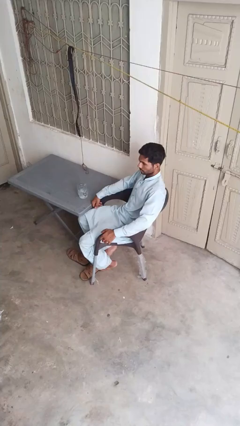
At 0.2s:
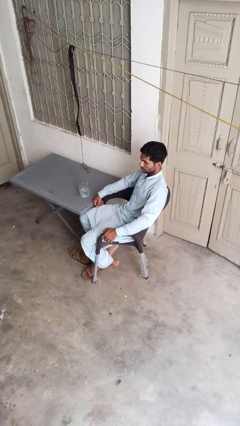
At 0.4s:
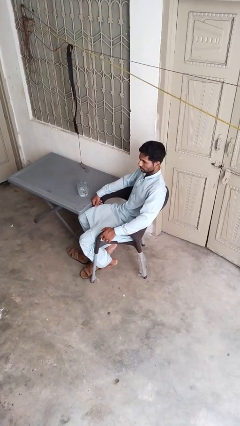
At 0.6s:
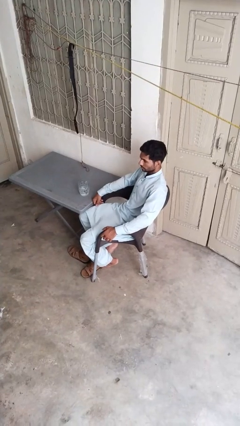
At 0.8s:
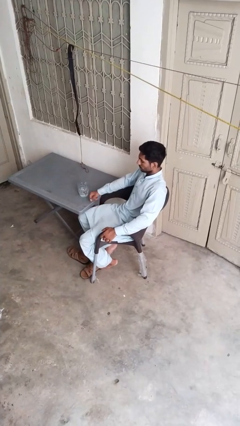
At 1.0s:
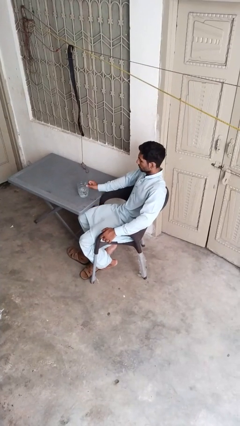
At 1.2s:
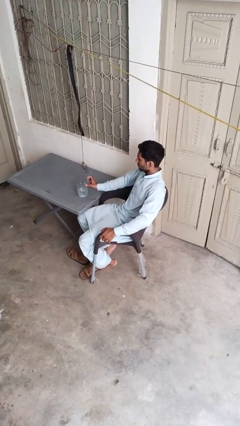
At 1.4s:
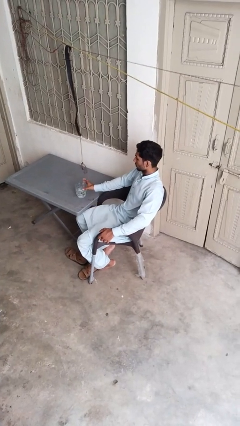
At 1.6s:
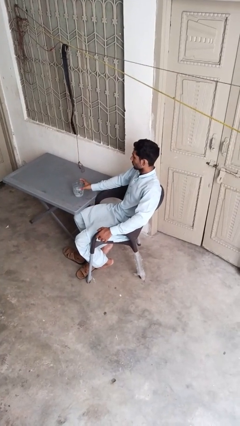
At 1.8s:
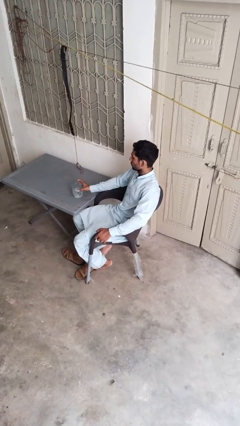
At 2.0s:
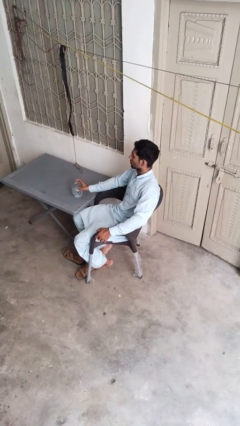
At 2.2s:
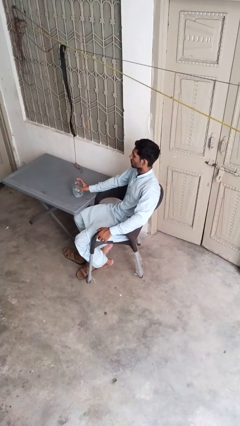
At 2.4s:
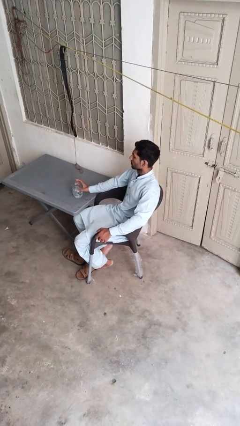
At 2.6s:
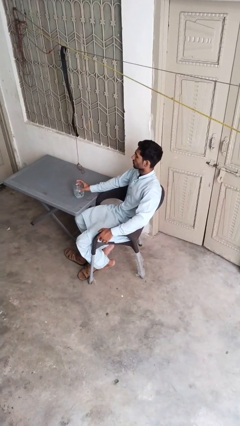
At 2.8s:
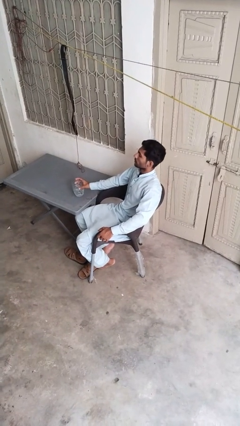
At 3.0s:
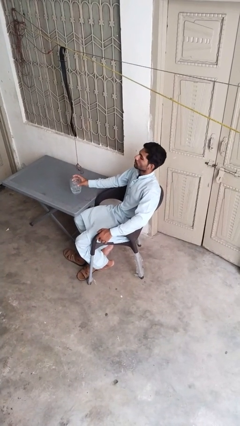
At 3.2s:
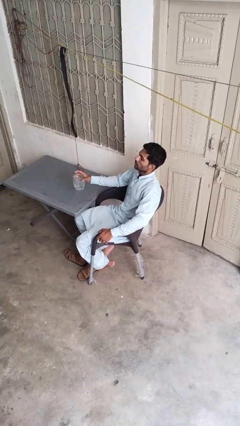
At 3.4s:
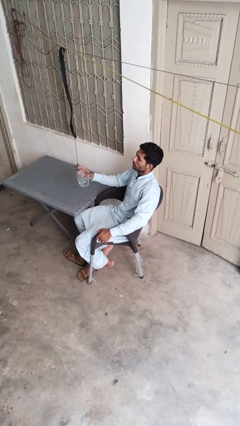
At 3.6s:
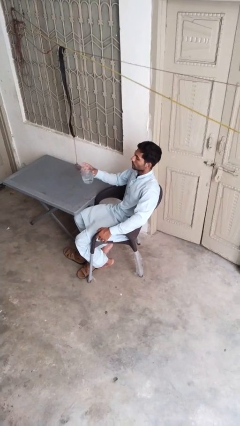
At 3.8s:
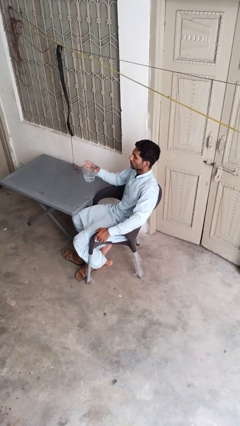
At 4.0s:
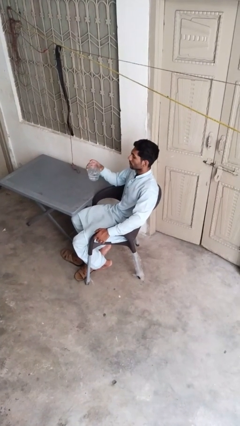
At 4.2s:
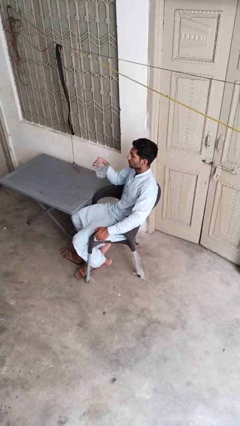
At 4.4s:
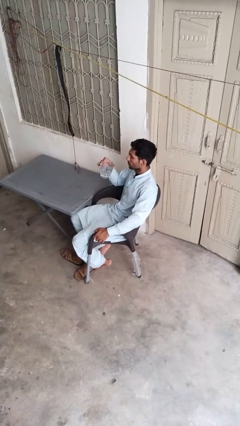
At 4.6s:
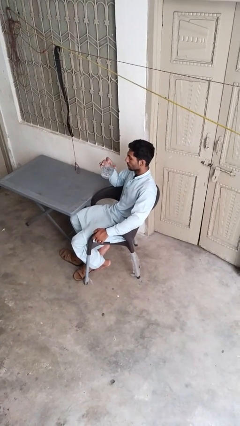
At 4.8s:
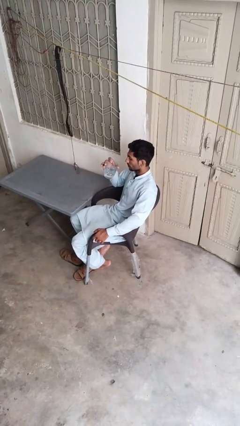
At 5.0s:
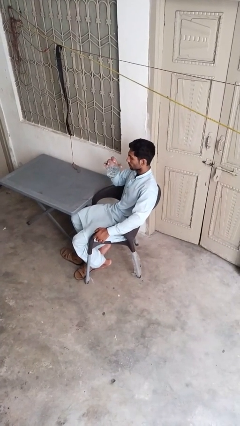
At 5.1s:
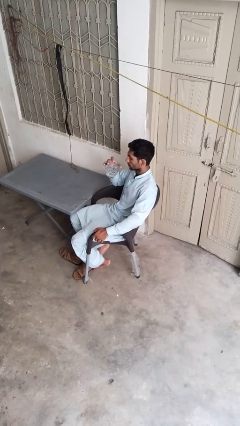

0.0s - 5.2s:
person picks up object from table

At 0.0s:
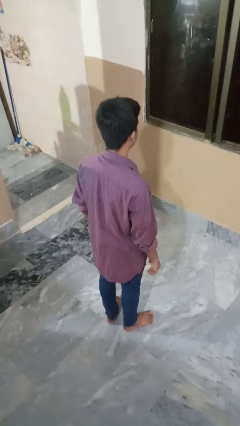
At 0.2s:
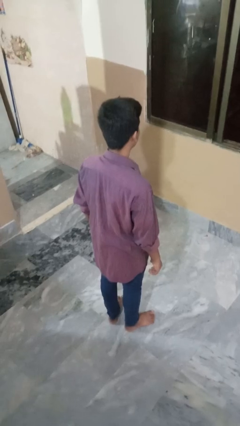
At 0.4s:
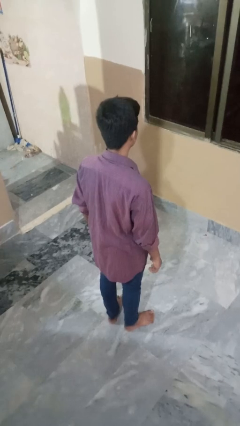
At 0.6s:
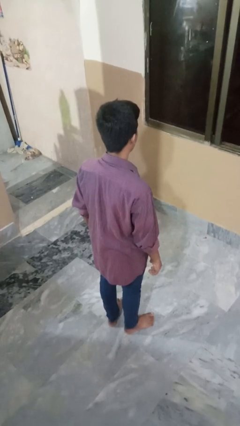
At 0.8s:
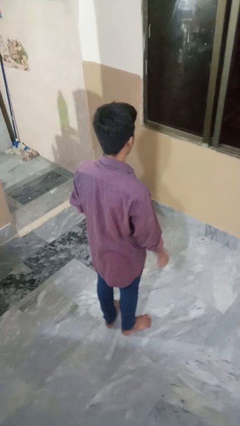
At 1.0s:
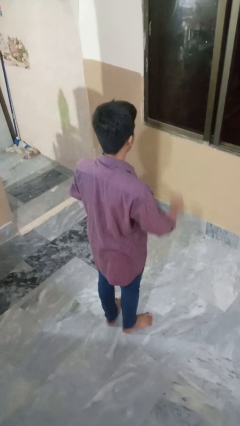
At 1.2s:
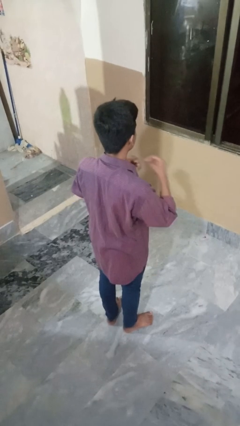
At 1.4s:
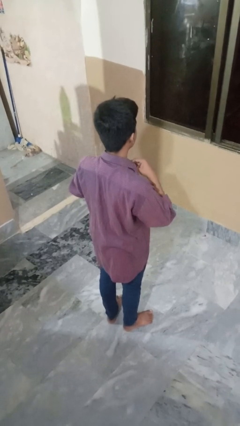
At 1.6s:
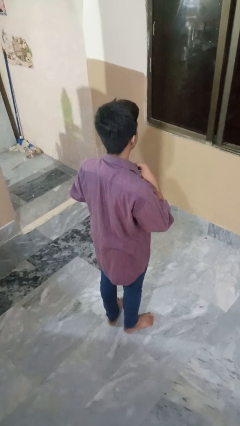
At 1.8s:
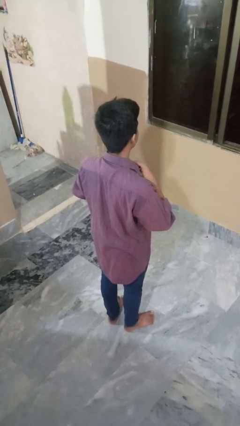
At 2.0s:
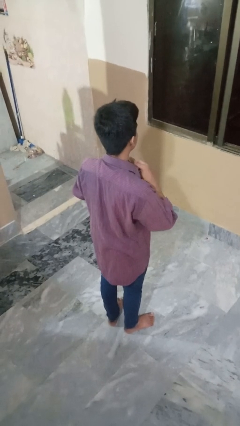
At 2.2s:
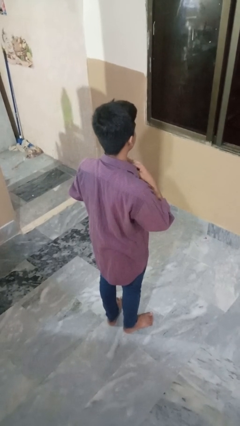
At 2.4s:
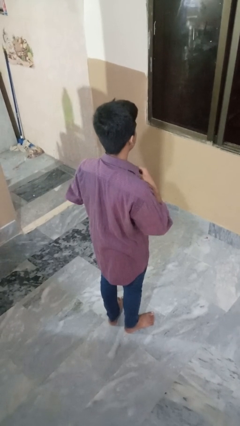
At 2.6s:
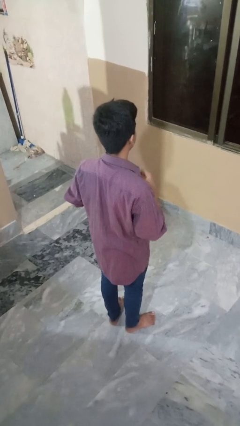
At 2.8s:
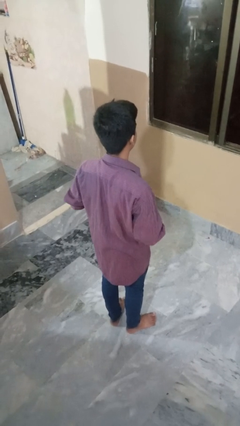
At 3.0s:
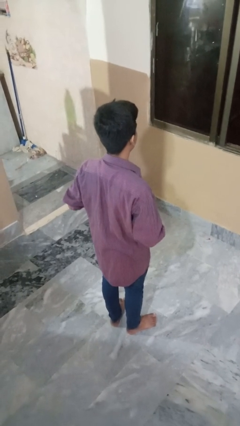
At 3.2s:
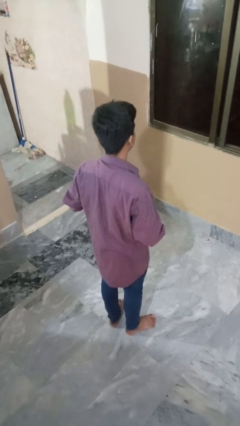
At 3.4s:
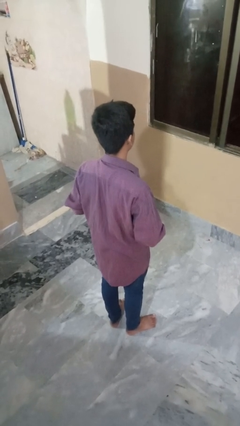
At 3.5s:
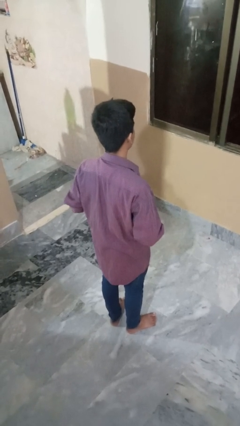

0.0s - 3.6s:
person unbuttons shirt

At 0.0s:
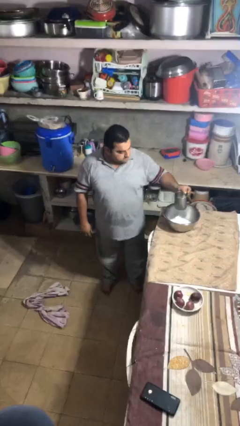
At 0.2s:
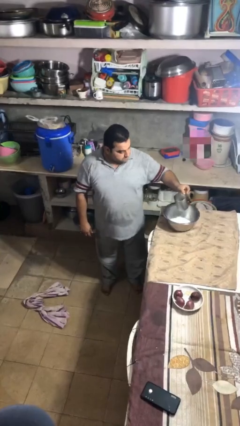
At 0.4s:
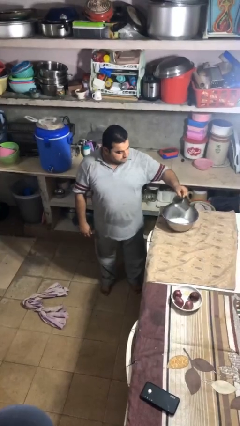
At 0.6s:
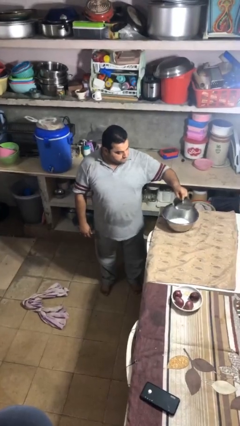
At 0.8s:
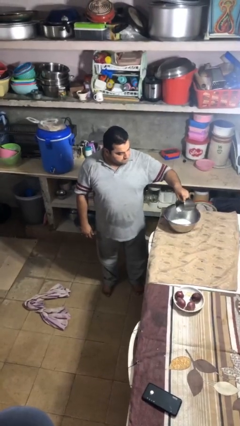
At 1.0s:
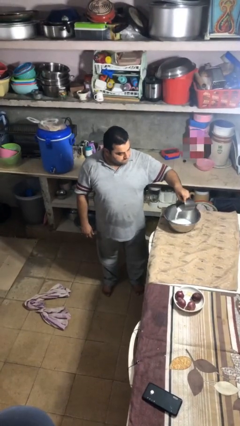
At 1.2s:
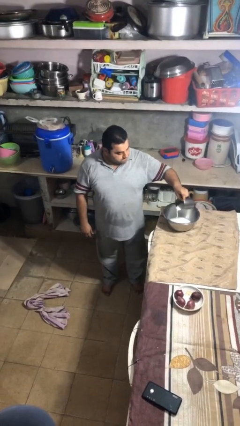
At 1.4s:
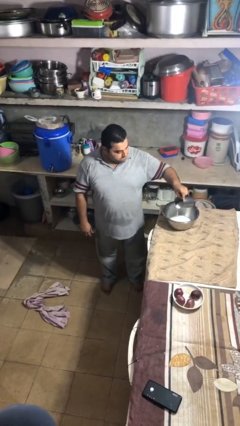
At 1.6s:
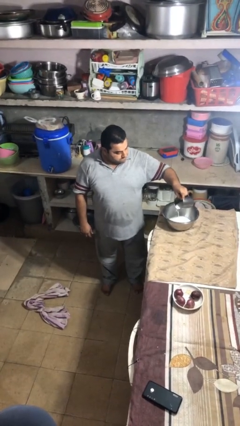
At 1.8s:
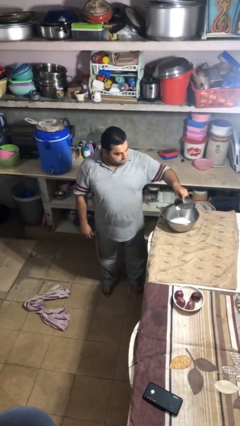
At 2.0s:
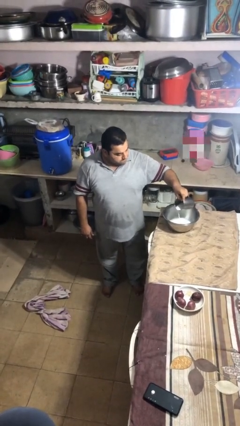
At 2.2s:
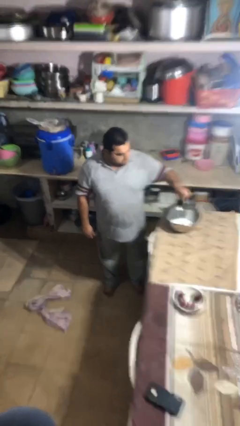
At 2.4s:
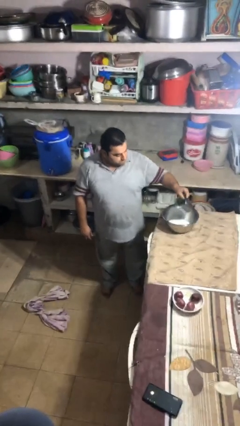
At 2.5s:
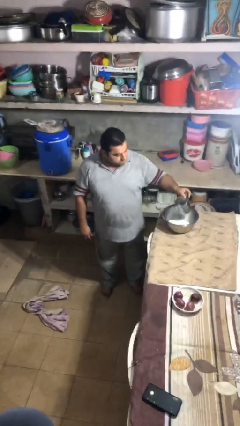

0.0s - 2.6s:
person pours into bowl

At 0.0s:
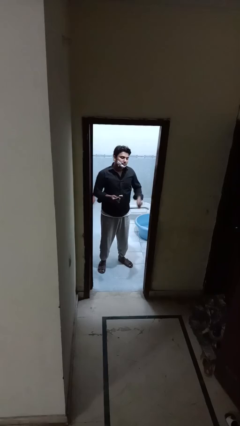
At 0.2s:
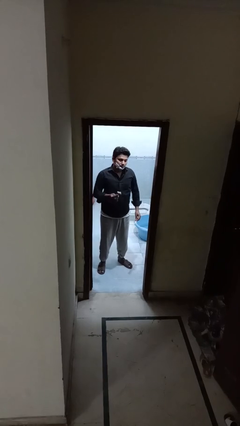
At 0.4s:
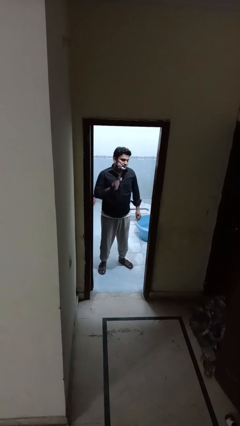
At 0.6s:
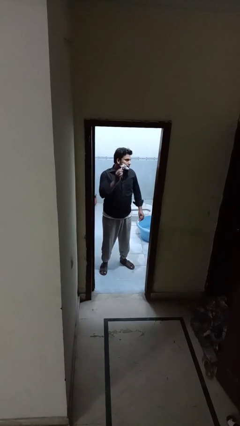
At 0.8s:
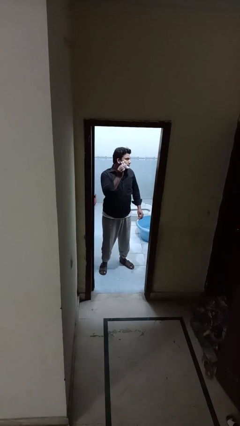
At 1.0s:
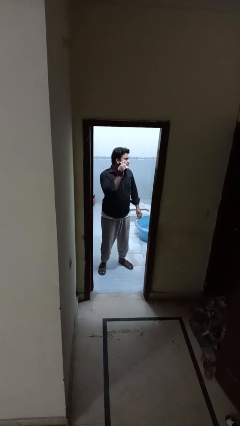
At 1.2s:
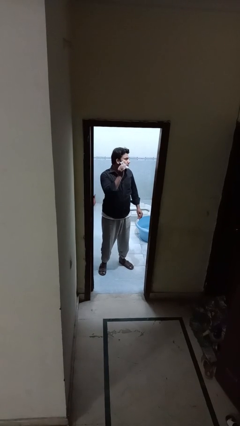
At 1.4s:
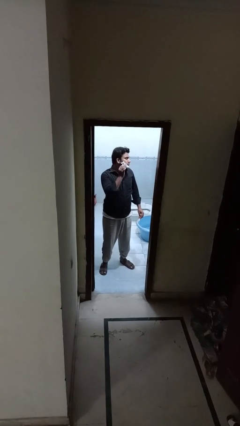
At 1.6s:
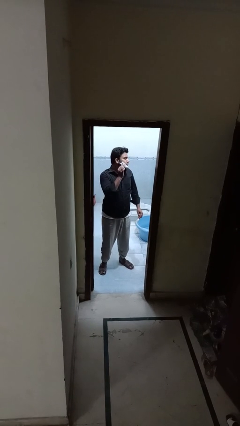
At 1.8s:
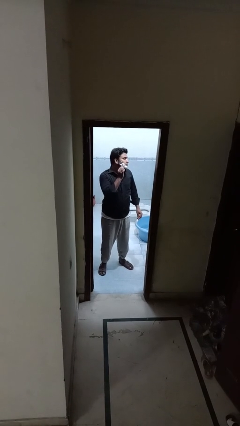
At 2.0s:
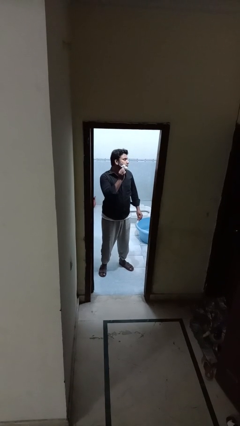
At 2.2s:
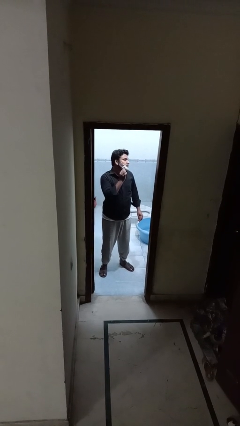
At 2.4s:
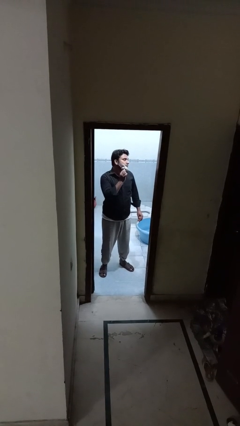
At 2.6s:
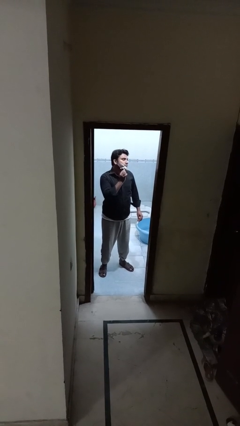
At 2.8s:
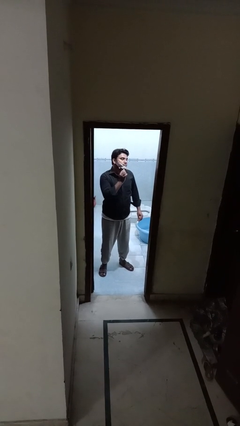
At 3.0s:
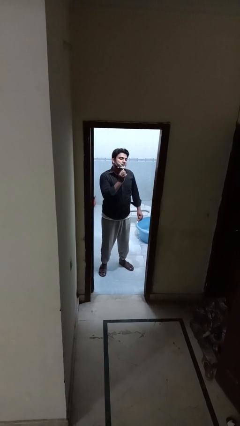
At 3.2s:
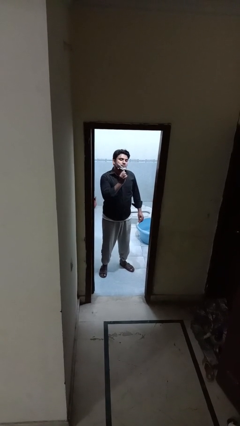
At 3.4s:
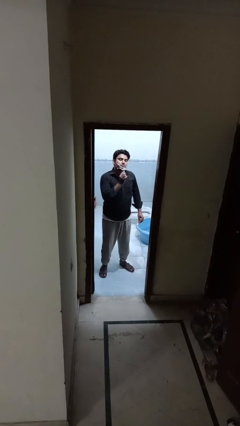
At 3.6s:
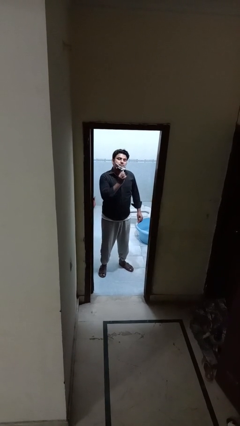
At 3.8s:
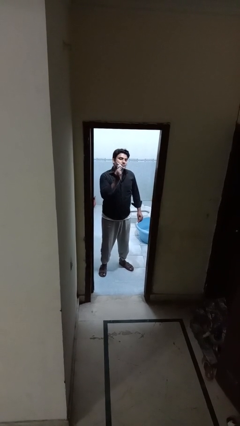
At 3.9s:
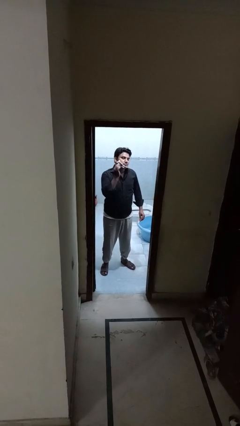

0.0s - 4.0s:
person shaves face

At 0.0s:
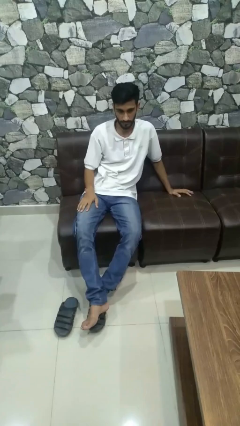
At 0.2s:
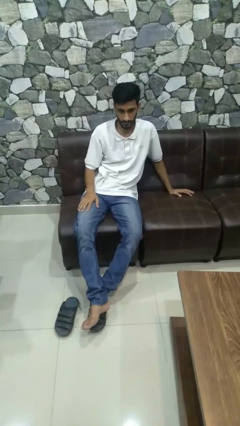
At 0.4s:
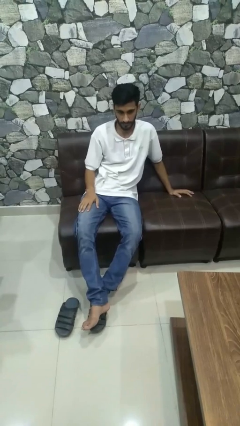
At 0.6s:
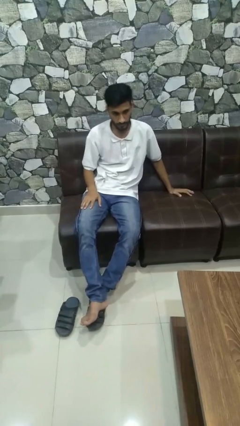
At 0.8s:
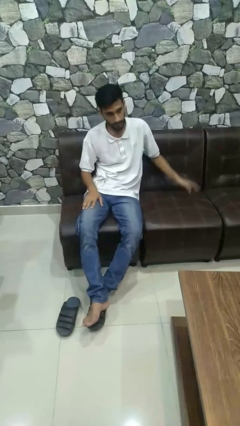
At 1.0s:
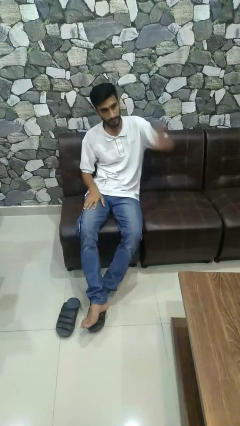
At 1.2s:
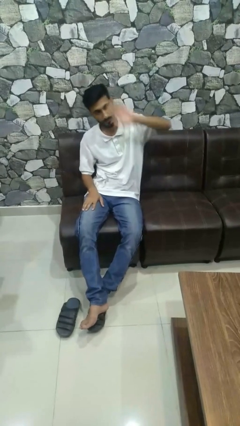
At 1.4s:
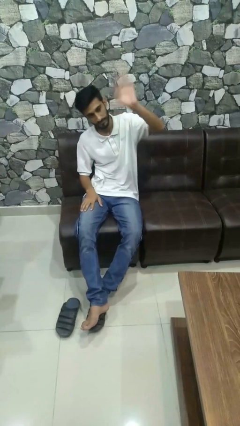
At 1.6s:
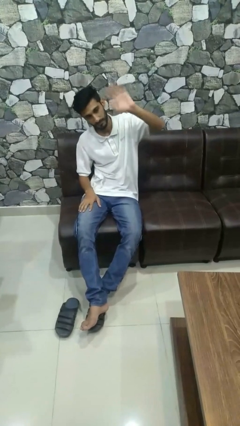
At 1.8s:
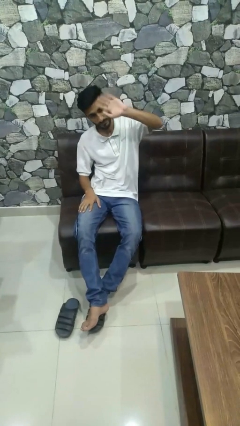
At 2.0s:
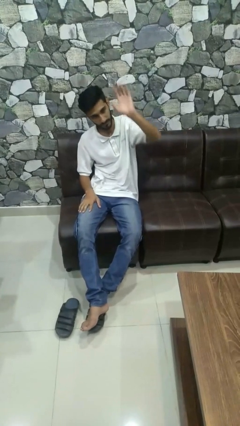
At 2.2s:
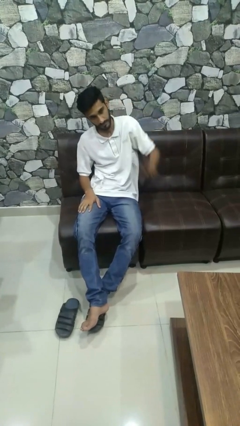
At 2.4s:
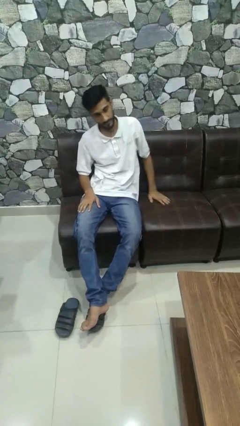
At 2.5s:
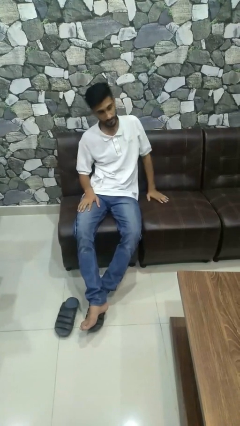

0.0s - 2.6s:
person waves at person

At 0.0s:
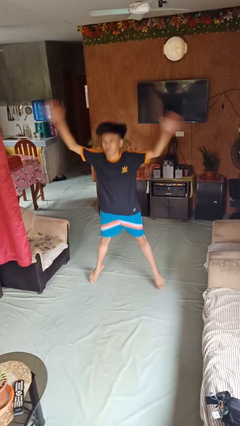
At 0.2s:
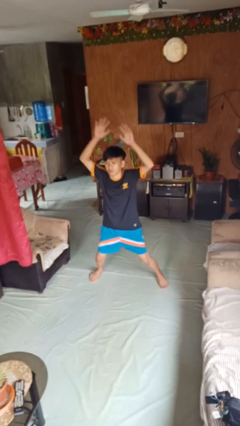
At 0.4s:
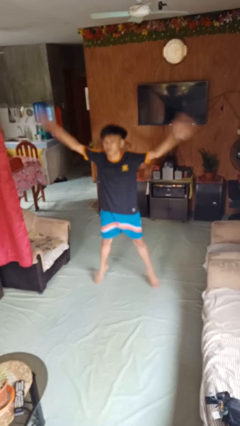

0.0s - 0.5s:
person exercises with jumping jacks
